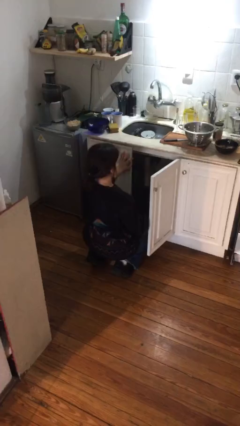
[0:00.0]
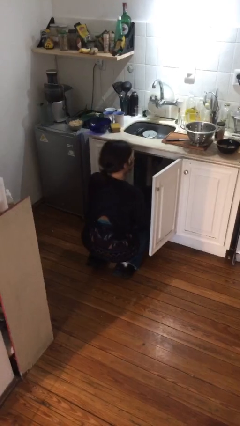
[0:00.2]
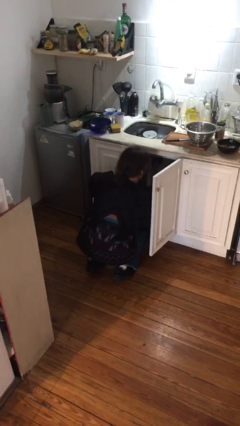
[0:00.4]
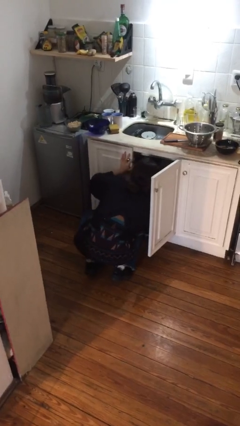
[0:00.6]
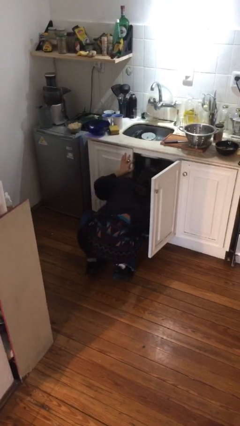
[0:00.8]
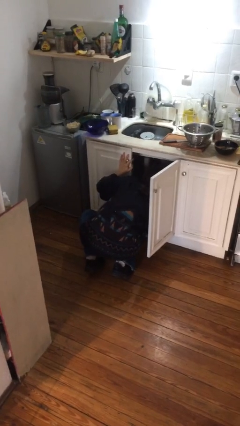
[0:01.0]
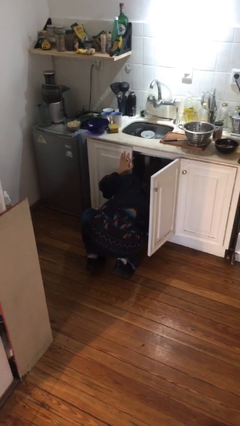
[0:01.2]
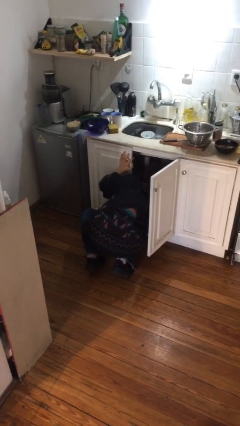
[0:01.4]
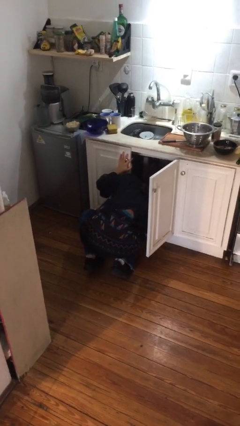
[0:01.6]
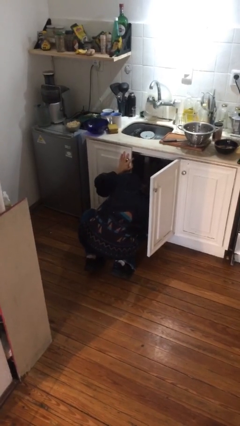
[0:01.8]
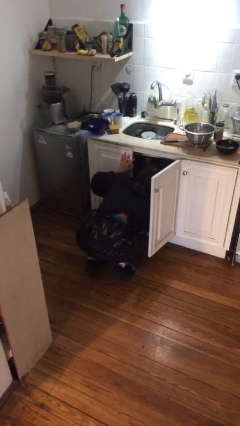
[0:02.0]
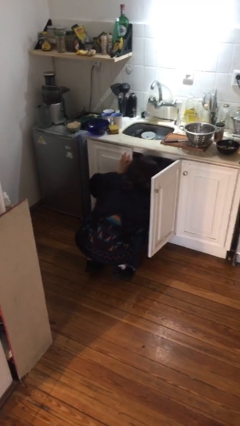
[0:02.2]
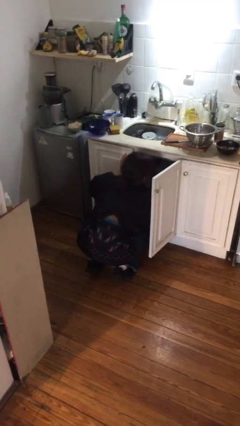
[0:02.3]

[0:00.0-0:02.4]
person searches in cabinet

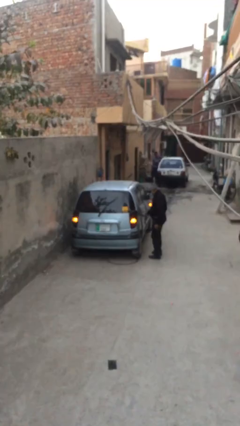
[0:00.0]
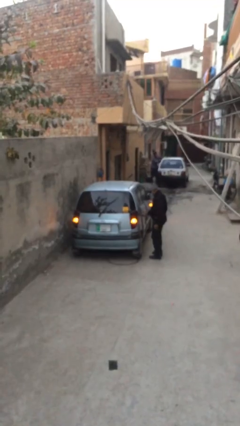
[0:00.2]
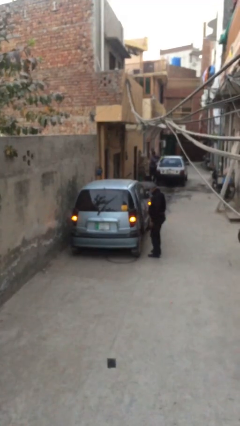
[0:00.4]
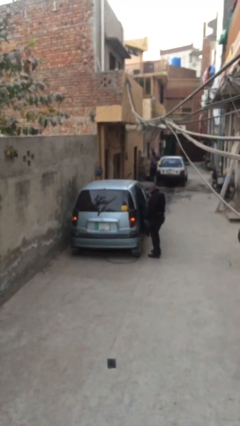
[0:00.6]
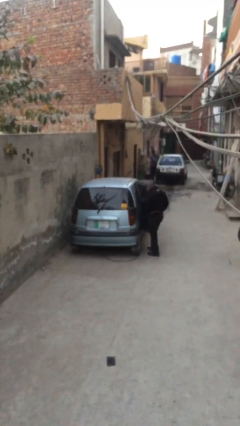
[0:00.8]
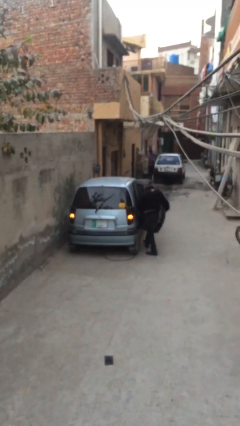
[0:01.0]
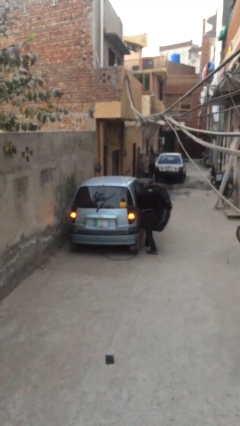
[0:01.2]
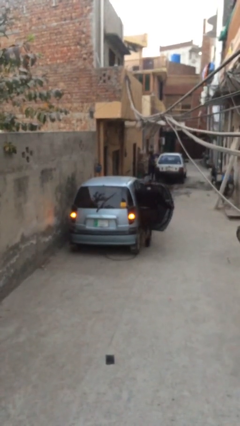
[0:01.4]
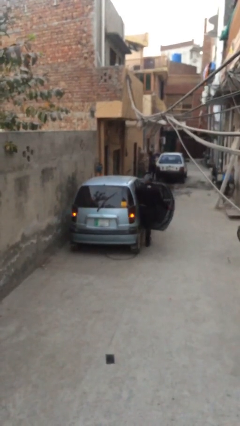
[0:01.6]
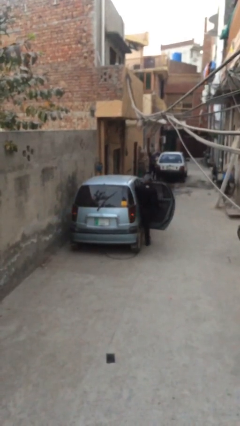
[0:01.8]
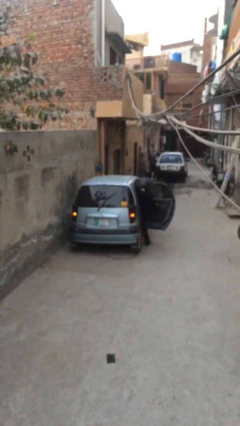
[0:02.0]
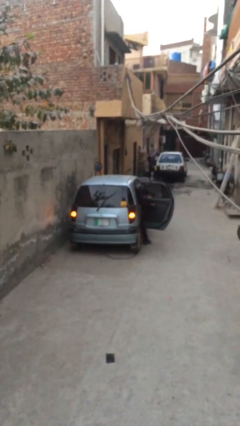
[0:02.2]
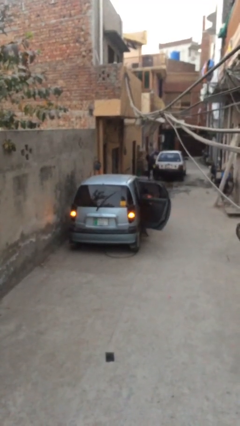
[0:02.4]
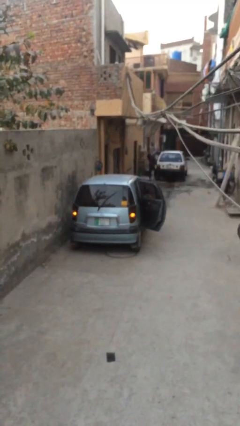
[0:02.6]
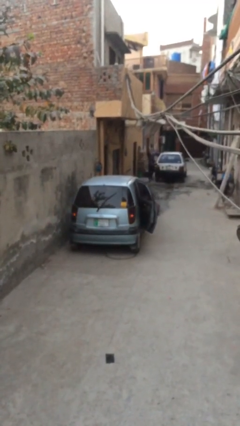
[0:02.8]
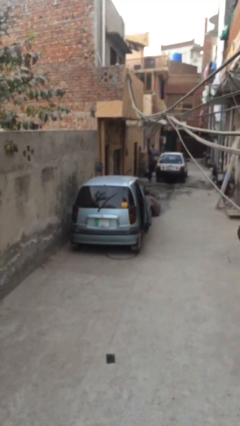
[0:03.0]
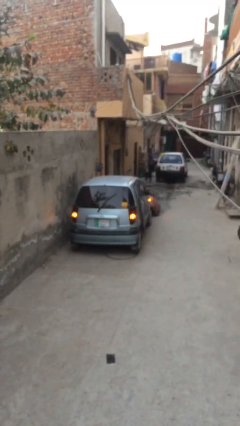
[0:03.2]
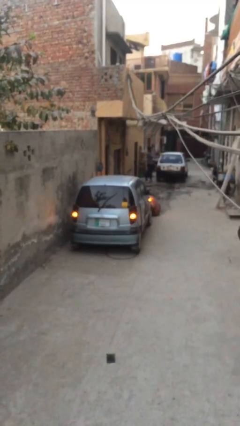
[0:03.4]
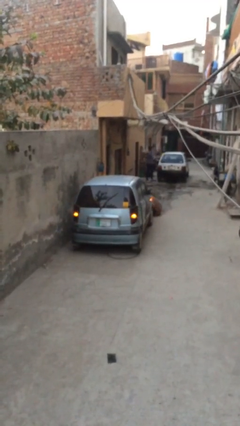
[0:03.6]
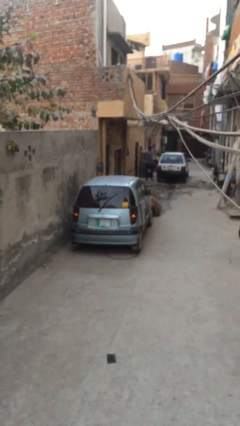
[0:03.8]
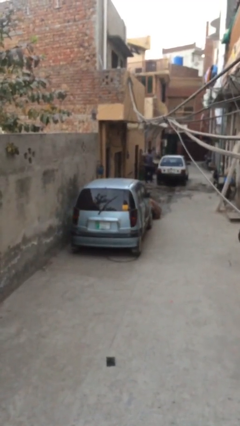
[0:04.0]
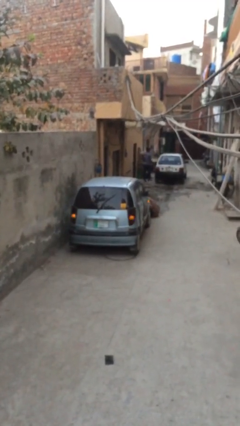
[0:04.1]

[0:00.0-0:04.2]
car picks up person

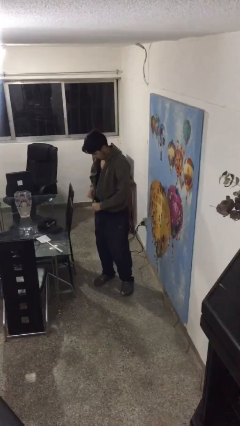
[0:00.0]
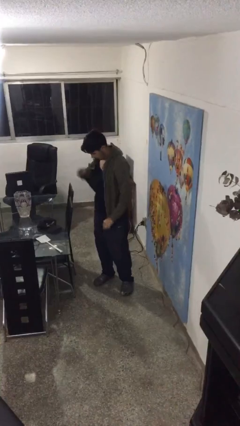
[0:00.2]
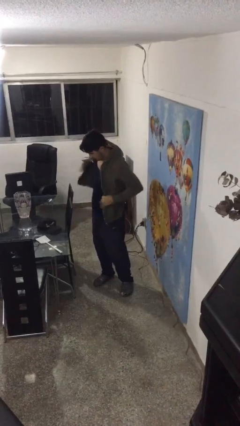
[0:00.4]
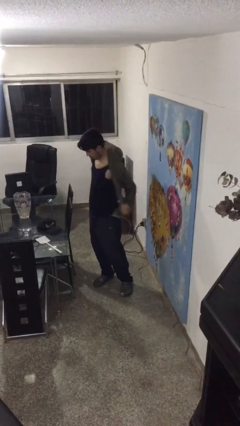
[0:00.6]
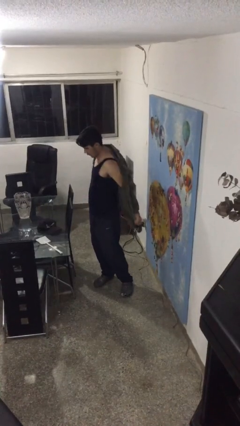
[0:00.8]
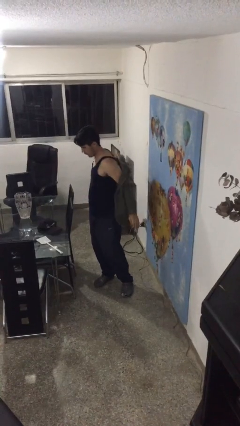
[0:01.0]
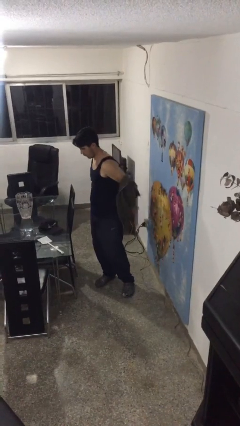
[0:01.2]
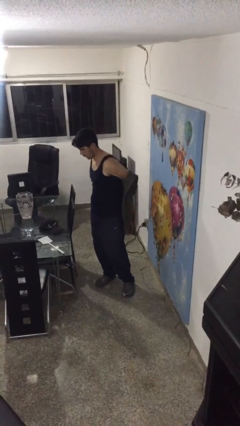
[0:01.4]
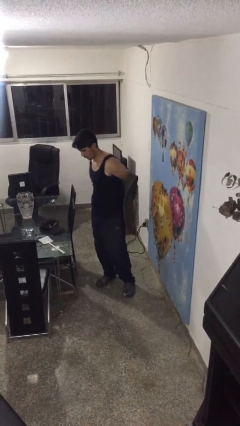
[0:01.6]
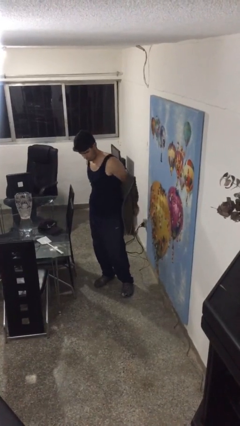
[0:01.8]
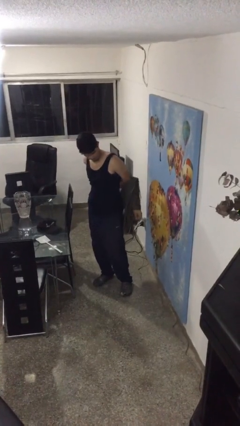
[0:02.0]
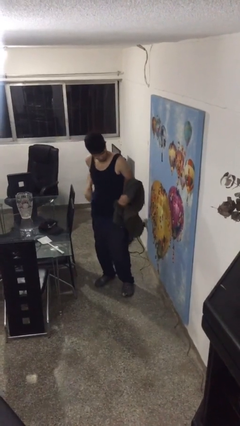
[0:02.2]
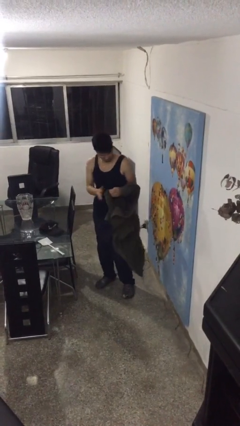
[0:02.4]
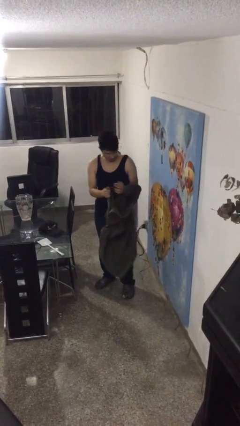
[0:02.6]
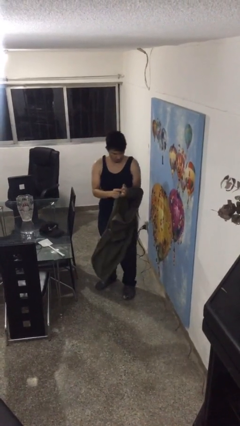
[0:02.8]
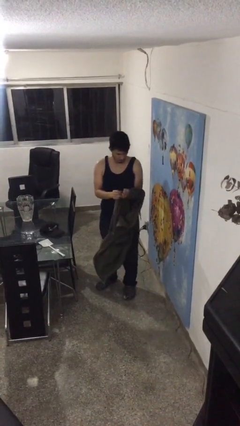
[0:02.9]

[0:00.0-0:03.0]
person takes off jacket

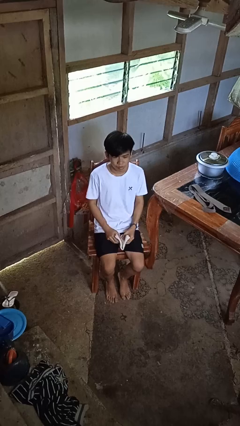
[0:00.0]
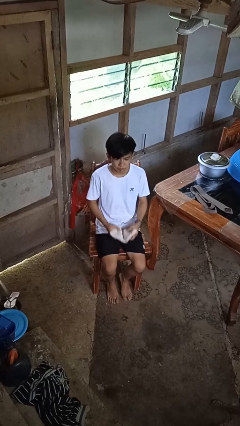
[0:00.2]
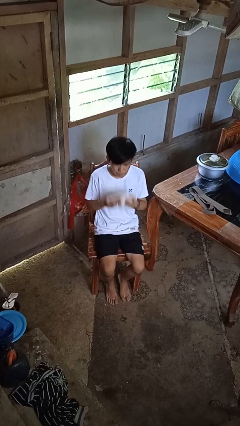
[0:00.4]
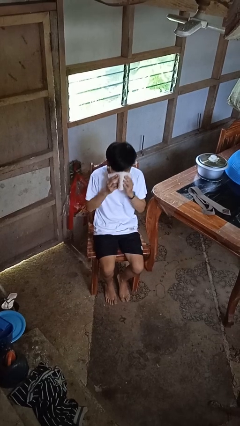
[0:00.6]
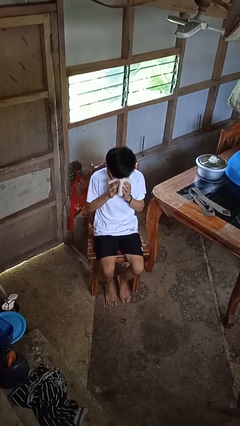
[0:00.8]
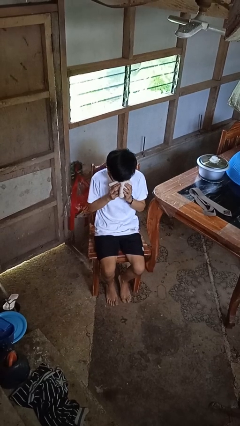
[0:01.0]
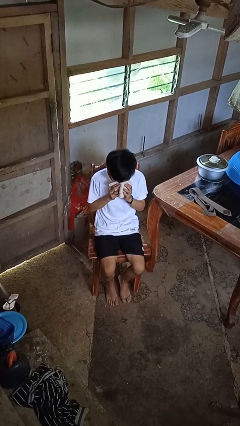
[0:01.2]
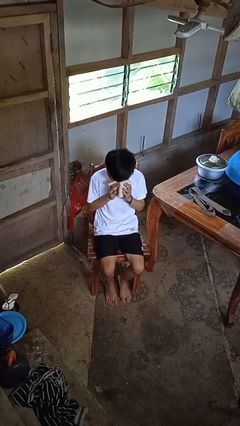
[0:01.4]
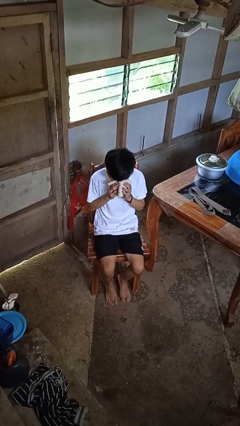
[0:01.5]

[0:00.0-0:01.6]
person blows nose

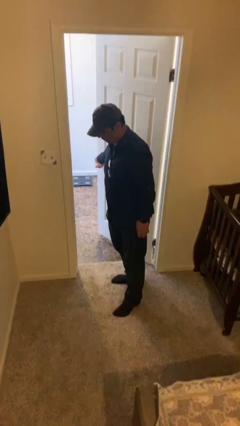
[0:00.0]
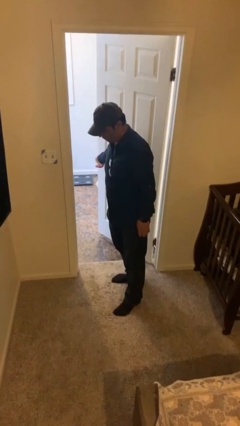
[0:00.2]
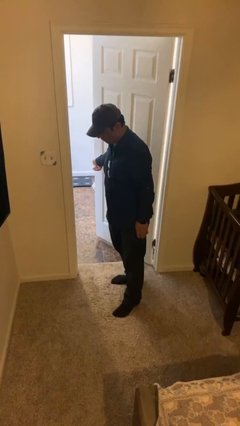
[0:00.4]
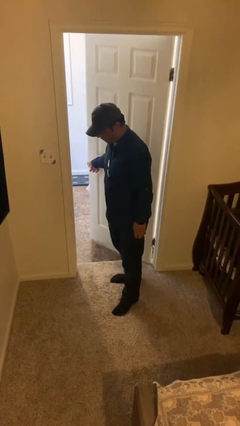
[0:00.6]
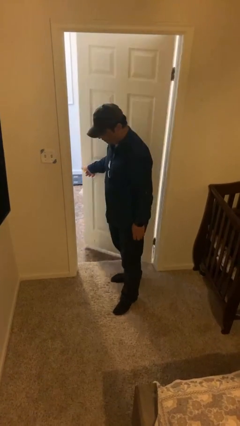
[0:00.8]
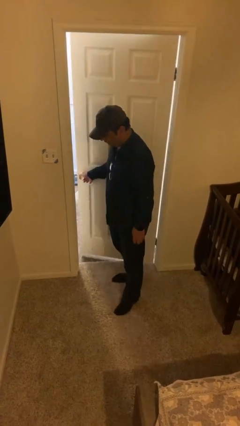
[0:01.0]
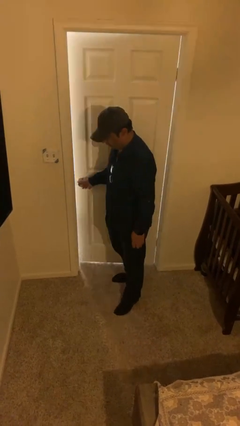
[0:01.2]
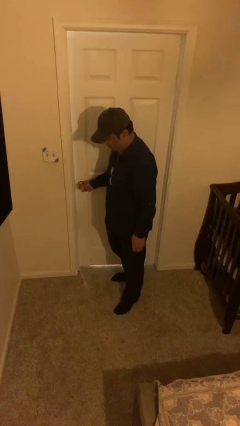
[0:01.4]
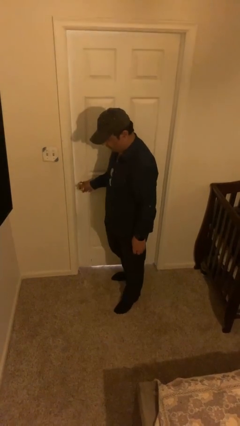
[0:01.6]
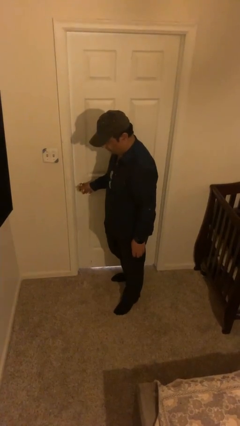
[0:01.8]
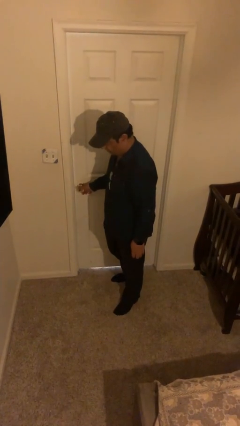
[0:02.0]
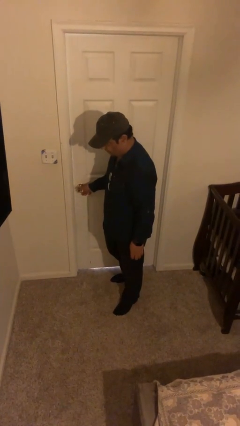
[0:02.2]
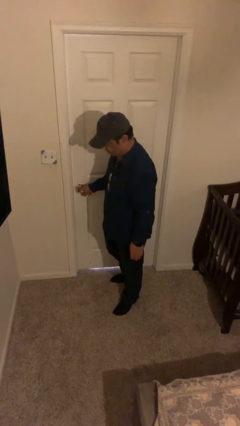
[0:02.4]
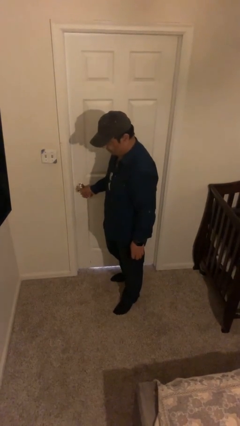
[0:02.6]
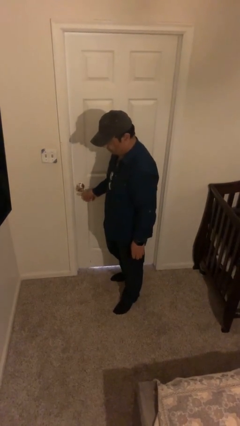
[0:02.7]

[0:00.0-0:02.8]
person closes facility door

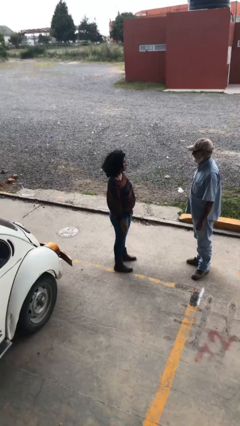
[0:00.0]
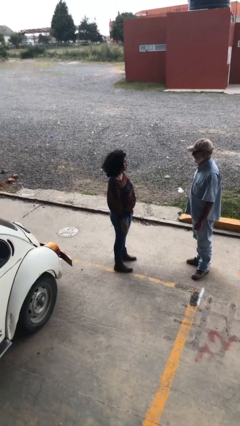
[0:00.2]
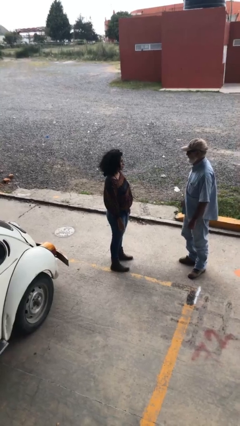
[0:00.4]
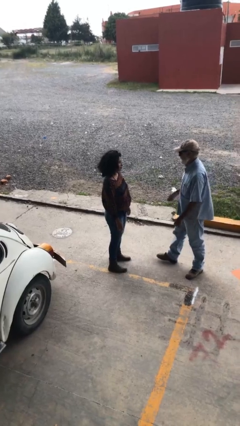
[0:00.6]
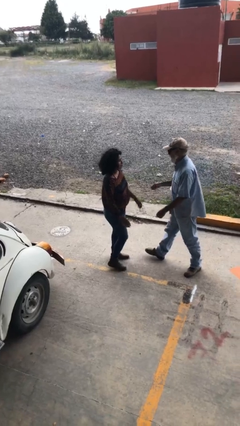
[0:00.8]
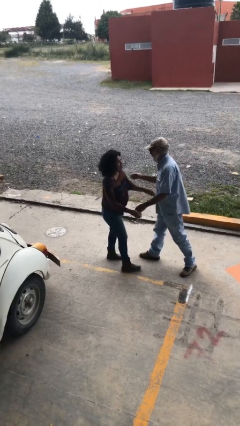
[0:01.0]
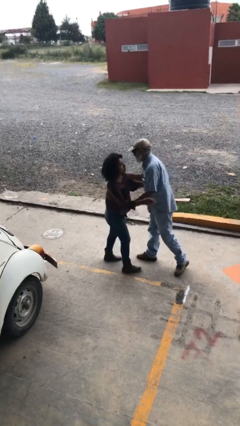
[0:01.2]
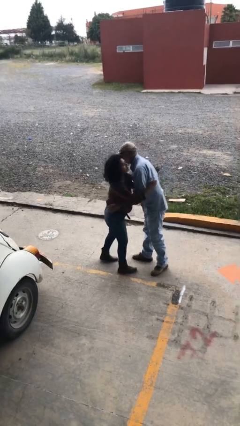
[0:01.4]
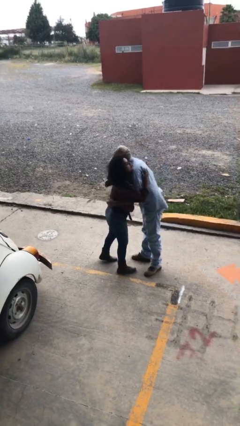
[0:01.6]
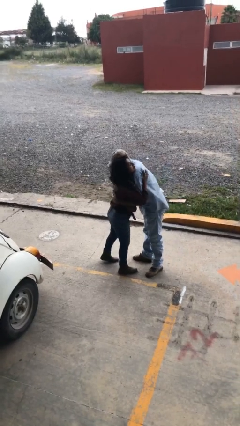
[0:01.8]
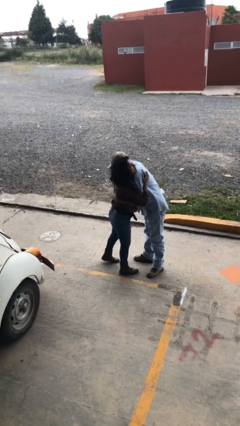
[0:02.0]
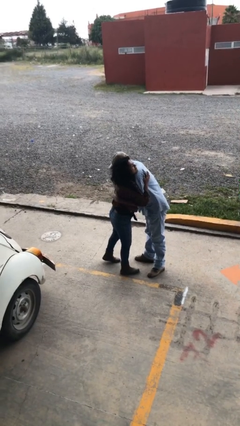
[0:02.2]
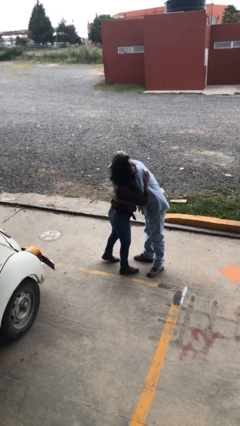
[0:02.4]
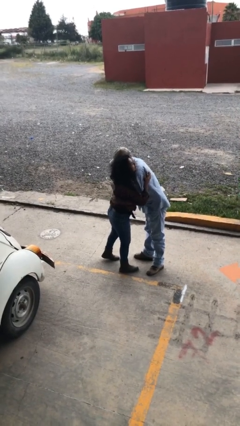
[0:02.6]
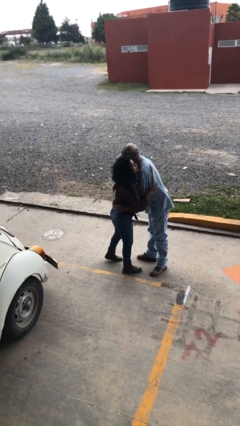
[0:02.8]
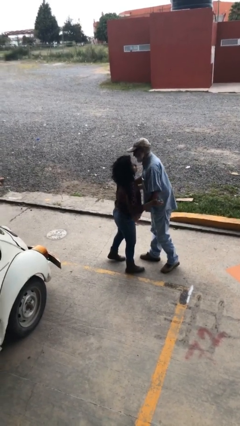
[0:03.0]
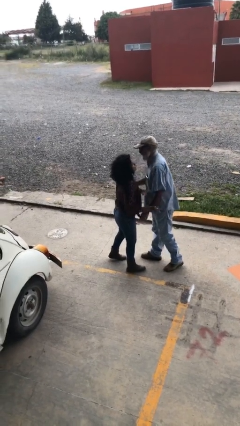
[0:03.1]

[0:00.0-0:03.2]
person embraces person
